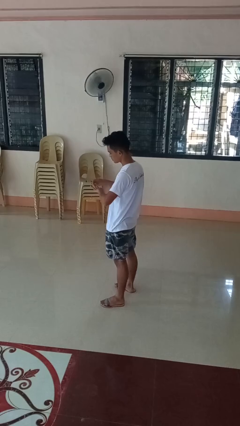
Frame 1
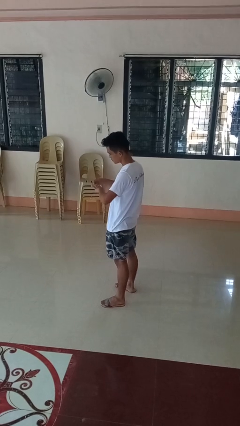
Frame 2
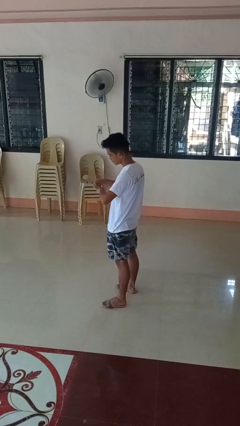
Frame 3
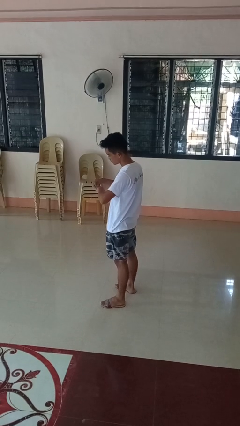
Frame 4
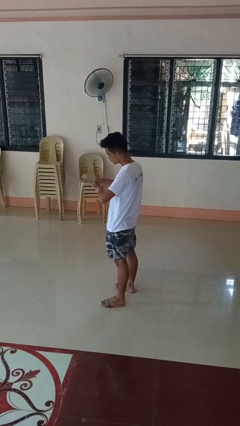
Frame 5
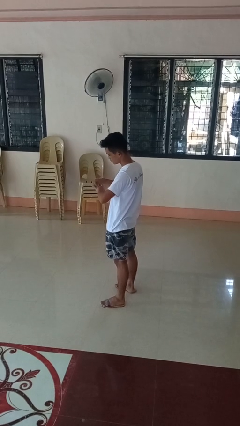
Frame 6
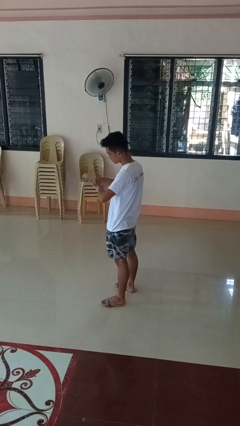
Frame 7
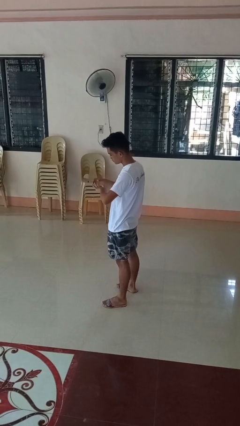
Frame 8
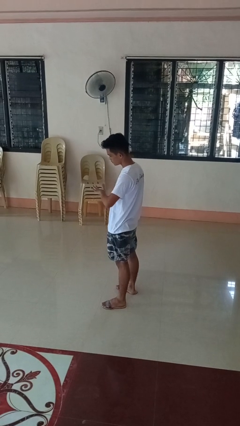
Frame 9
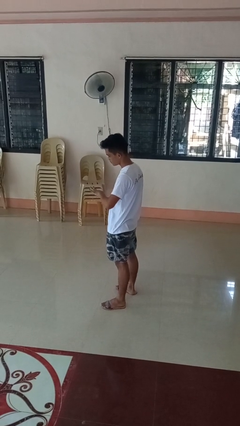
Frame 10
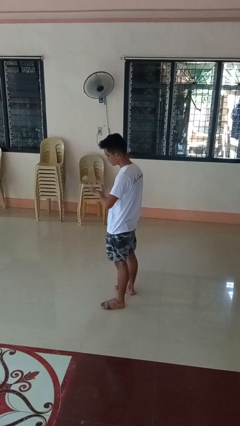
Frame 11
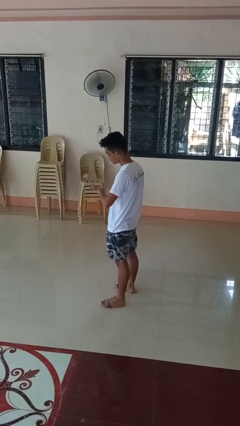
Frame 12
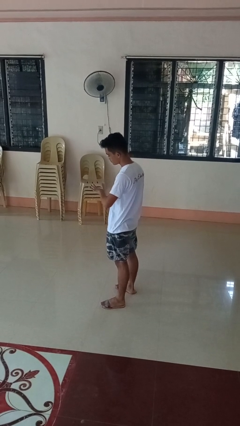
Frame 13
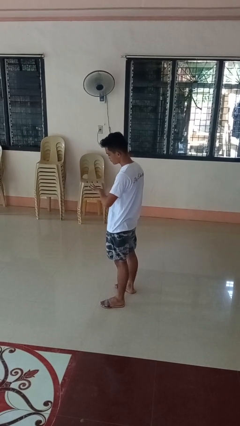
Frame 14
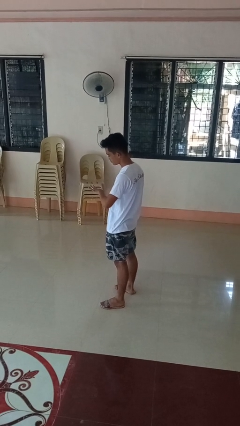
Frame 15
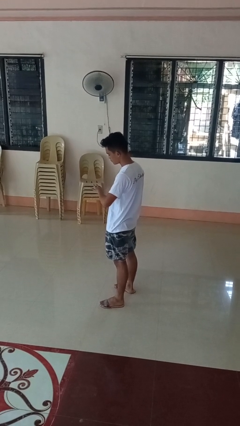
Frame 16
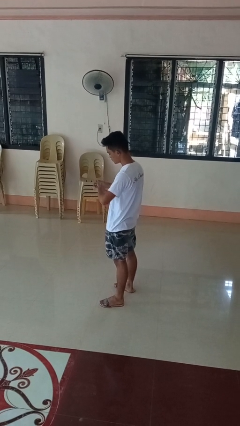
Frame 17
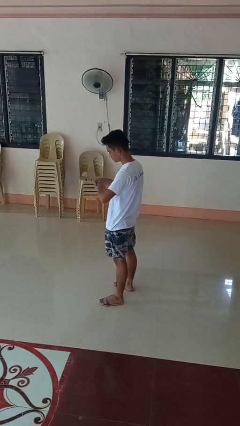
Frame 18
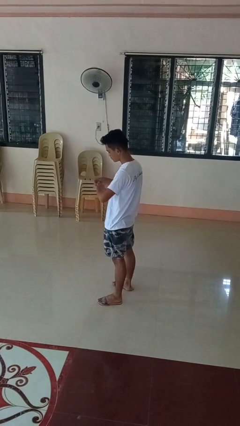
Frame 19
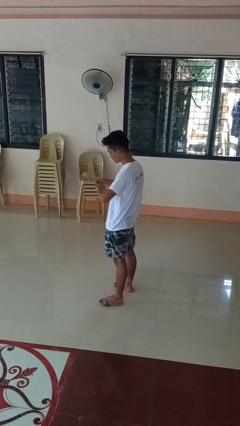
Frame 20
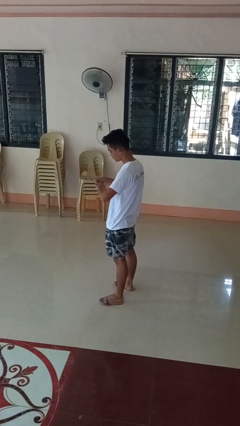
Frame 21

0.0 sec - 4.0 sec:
person puts on ring

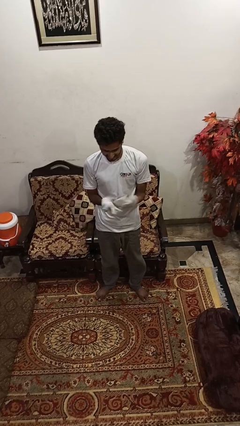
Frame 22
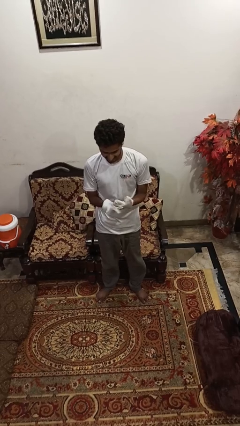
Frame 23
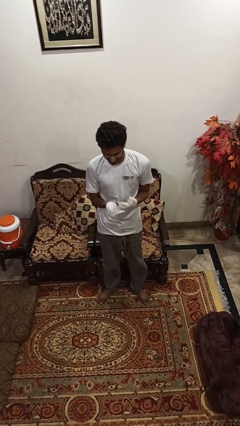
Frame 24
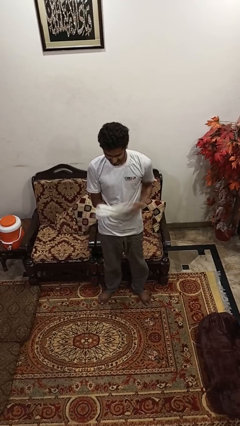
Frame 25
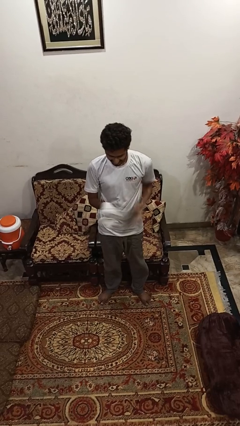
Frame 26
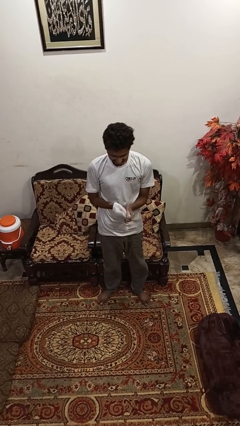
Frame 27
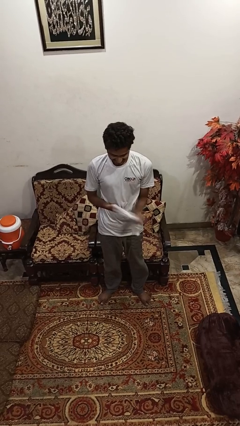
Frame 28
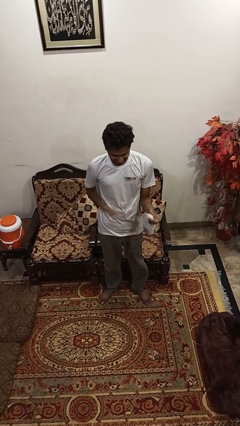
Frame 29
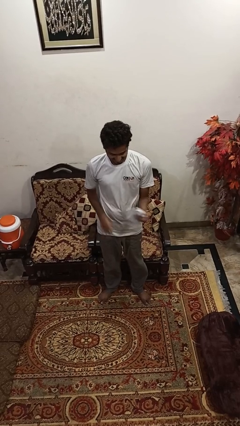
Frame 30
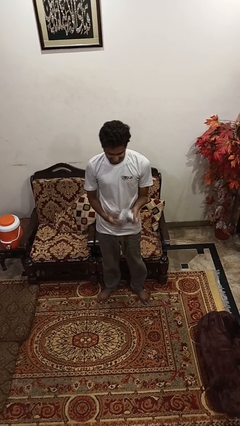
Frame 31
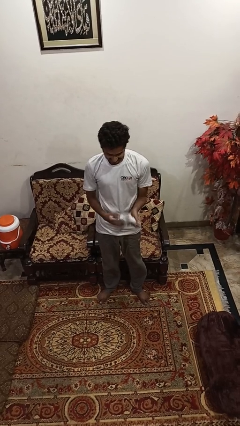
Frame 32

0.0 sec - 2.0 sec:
person takes off gloves

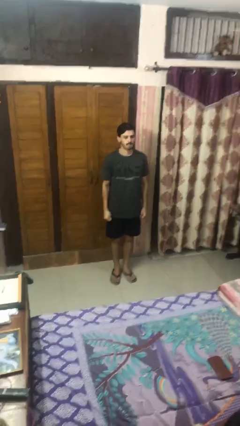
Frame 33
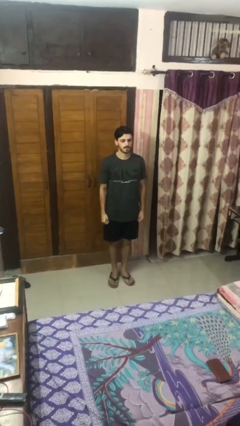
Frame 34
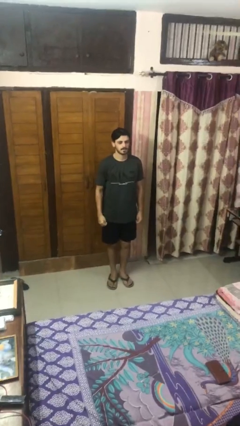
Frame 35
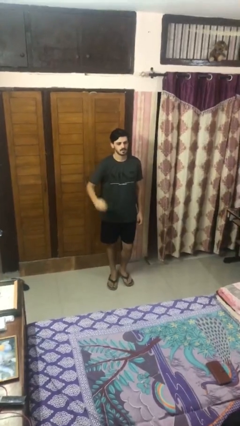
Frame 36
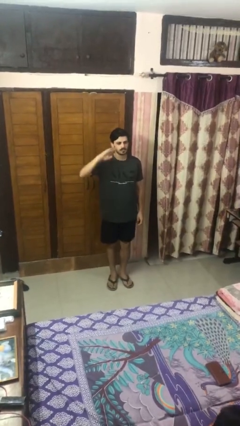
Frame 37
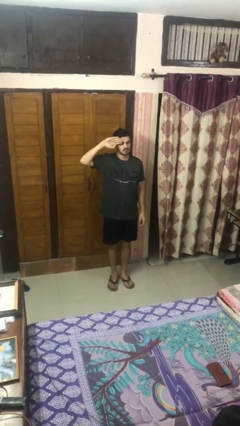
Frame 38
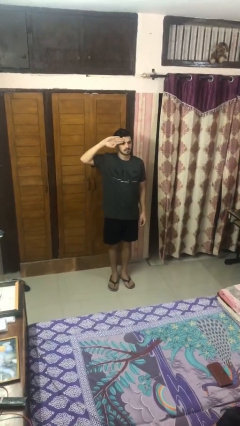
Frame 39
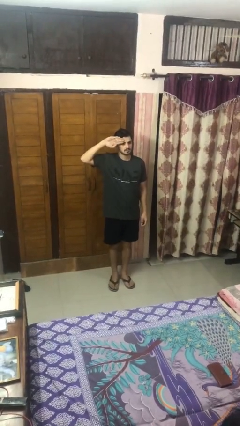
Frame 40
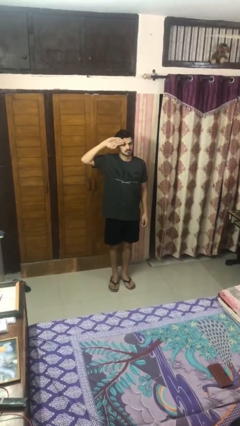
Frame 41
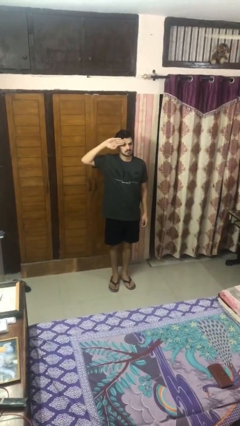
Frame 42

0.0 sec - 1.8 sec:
person salutes

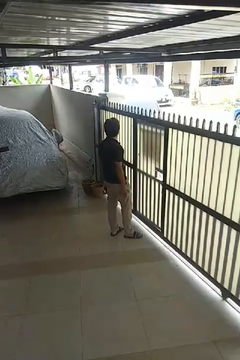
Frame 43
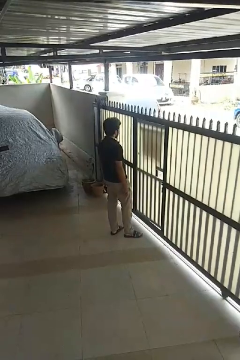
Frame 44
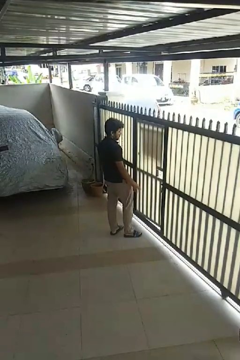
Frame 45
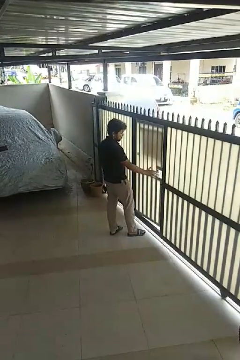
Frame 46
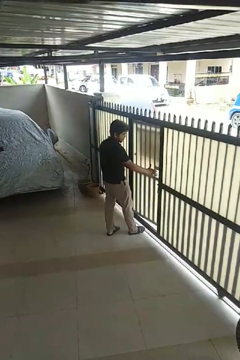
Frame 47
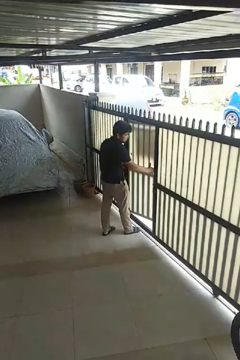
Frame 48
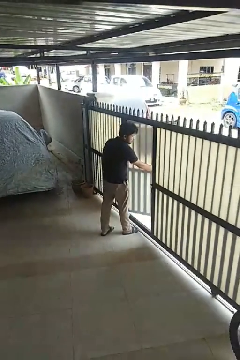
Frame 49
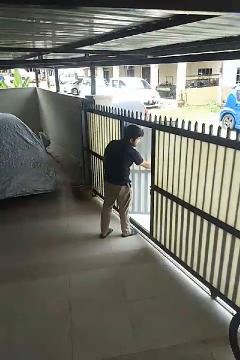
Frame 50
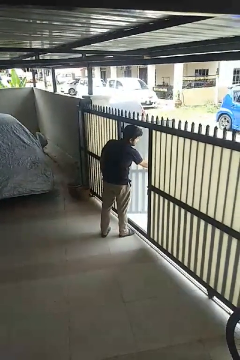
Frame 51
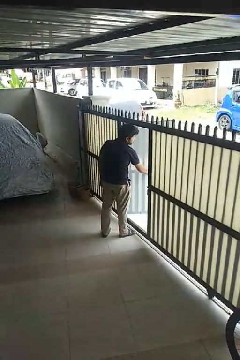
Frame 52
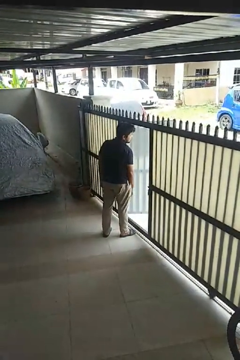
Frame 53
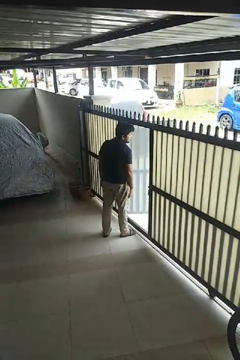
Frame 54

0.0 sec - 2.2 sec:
person opens gate

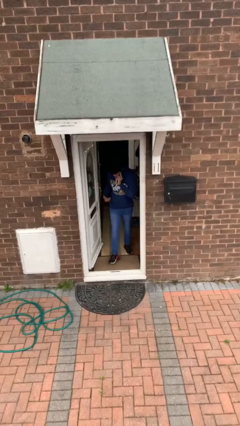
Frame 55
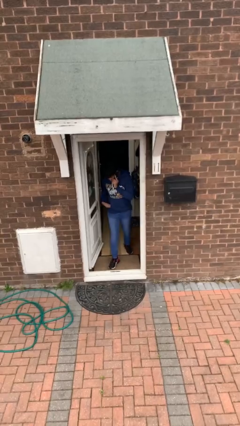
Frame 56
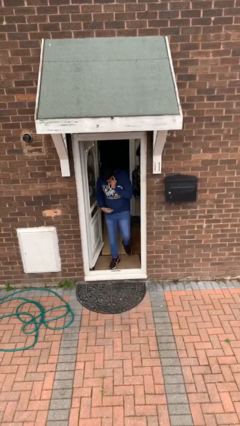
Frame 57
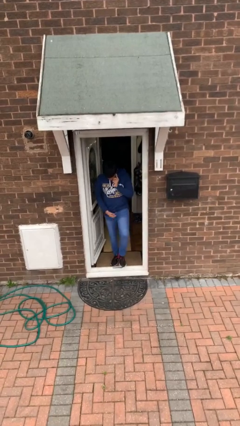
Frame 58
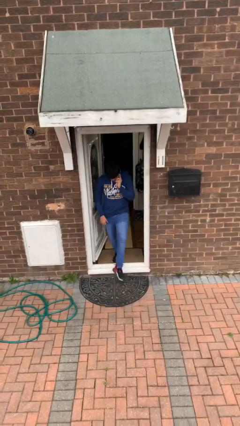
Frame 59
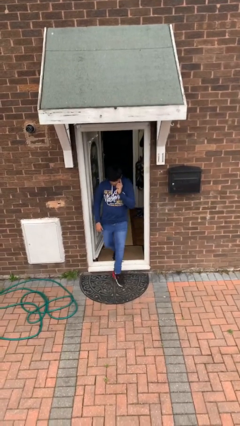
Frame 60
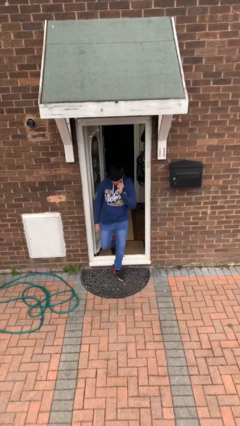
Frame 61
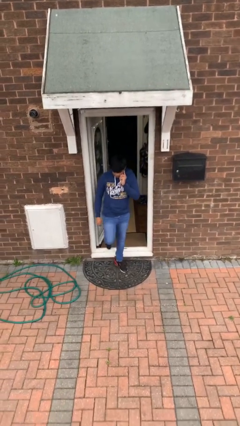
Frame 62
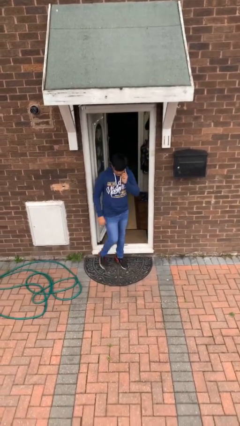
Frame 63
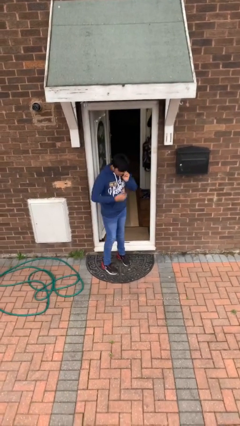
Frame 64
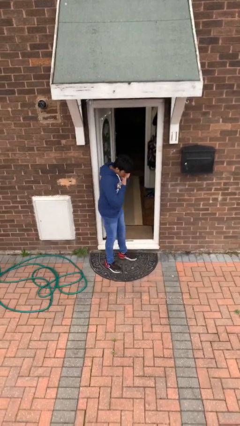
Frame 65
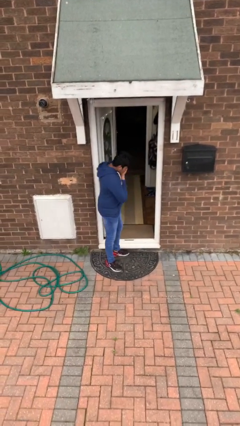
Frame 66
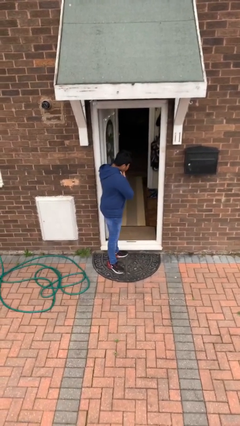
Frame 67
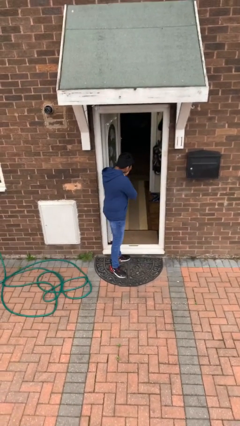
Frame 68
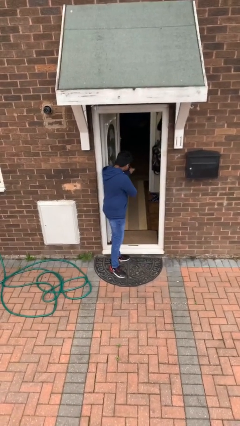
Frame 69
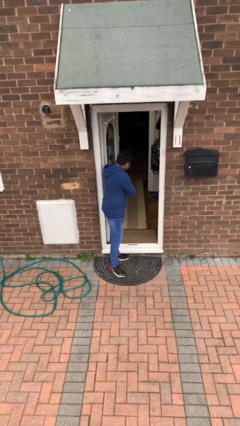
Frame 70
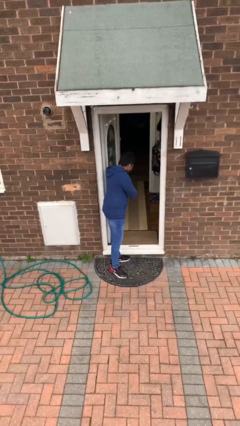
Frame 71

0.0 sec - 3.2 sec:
person enters scene through structure

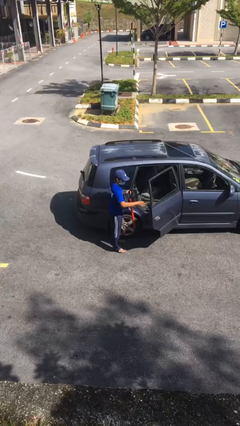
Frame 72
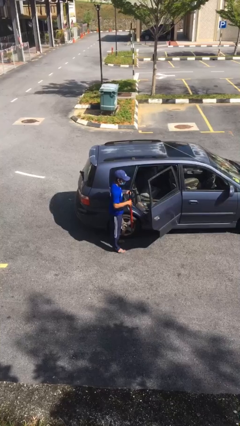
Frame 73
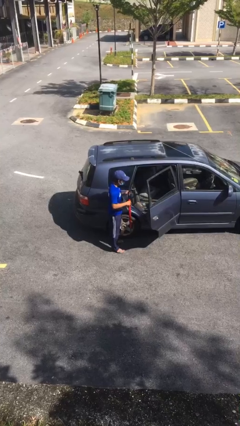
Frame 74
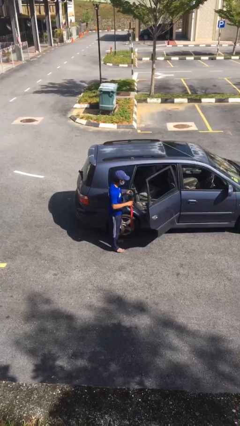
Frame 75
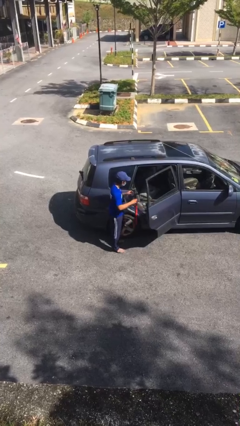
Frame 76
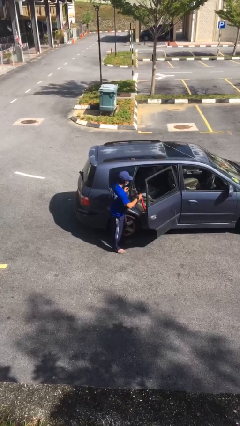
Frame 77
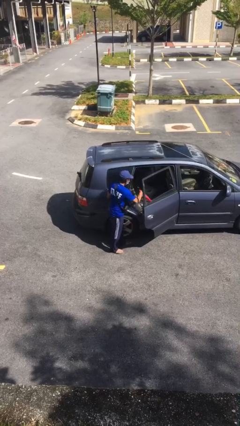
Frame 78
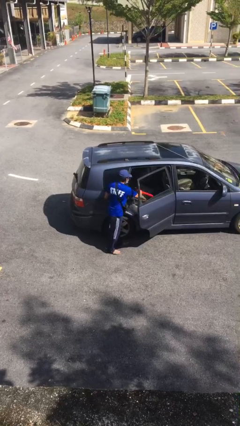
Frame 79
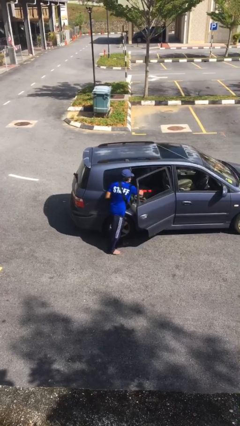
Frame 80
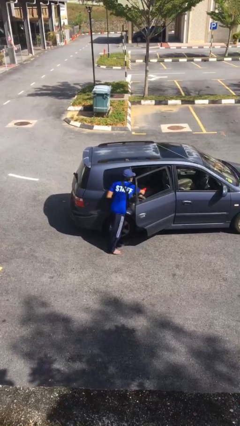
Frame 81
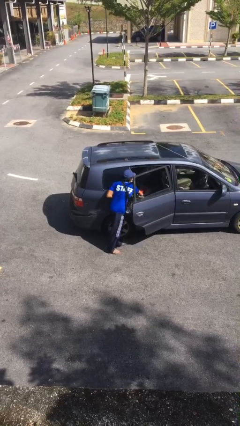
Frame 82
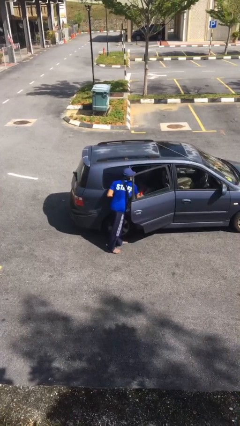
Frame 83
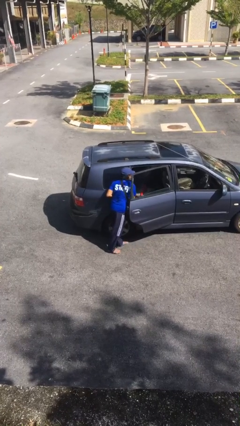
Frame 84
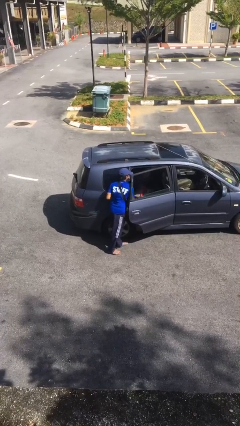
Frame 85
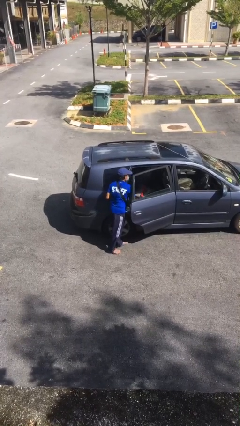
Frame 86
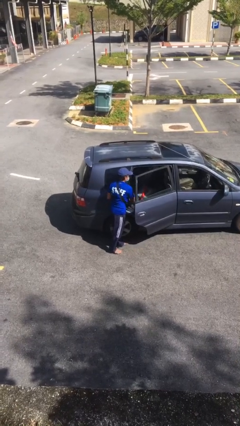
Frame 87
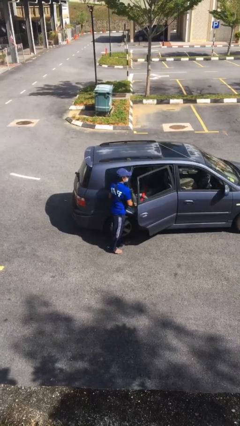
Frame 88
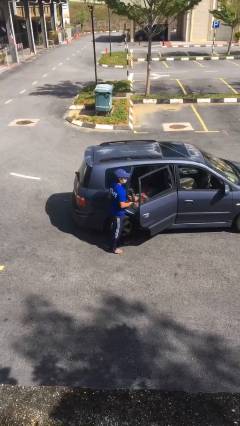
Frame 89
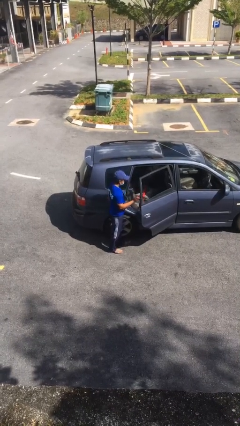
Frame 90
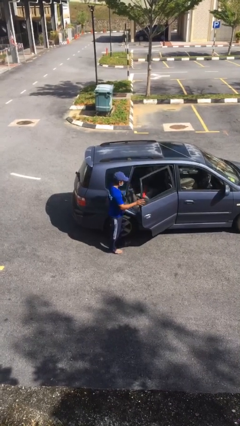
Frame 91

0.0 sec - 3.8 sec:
person loads car

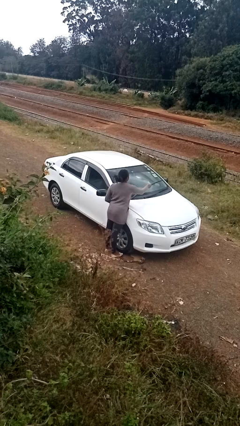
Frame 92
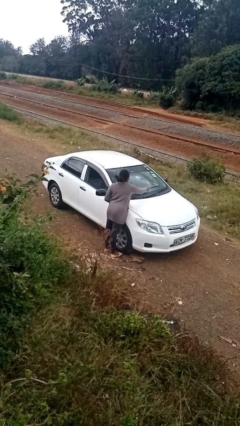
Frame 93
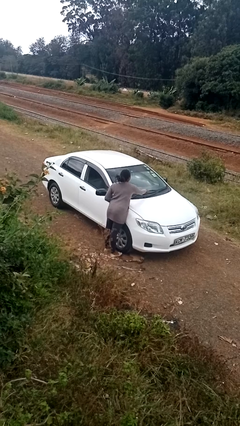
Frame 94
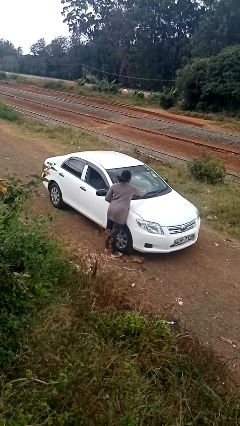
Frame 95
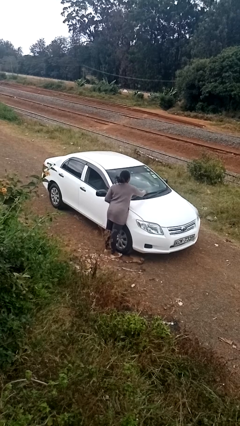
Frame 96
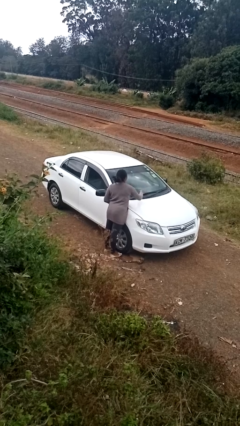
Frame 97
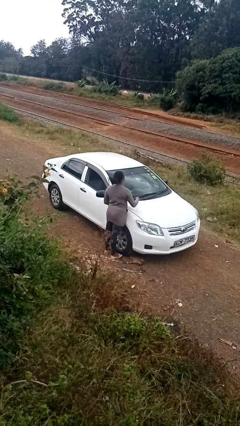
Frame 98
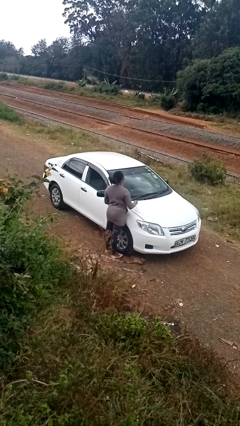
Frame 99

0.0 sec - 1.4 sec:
person flips down car wipers
